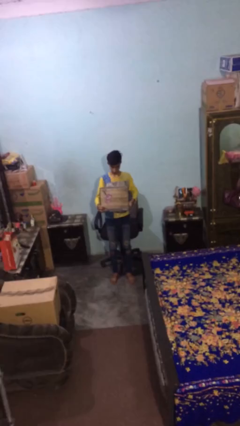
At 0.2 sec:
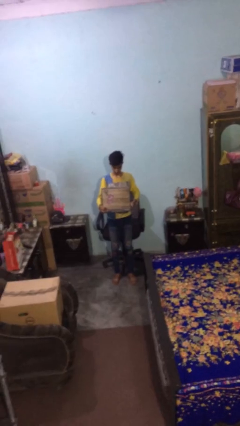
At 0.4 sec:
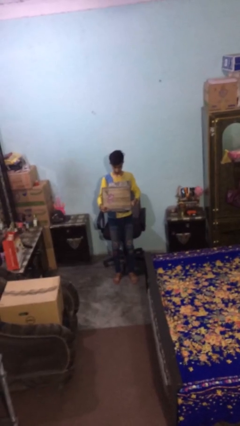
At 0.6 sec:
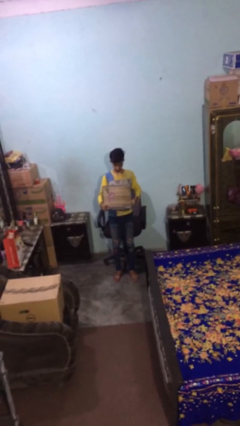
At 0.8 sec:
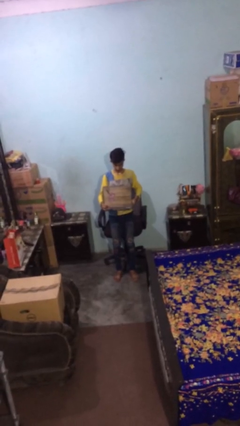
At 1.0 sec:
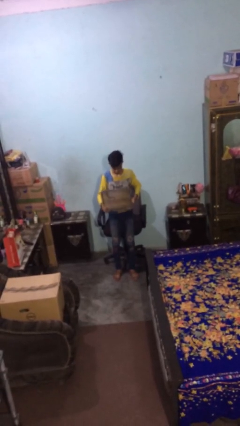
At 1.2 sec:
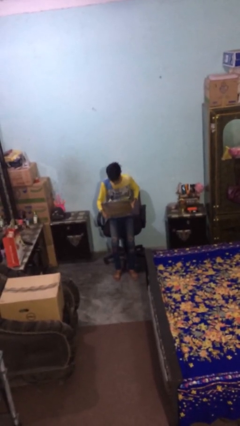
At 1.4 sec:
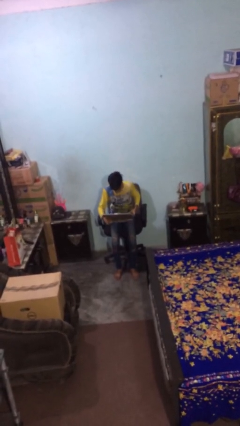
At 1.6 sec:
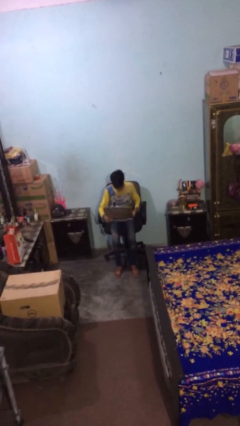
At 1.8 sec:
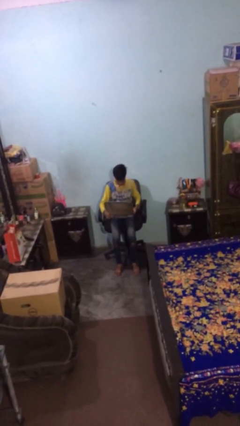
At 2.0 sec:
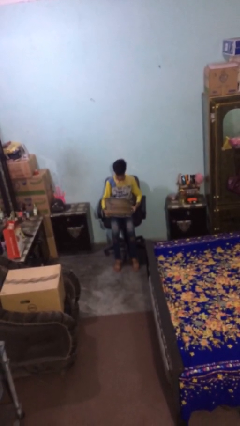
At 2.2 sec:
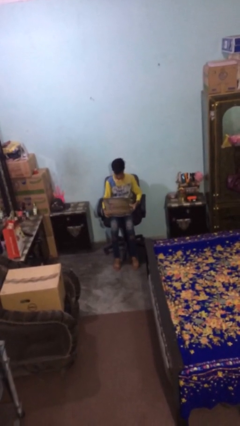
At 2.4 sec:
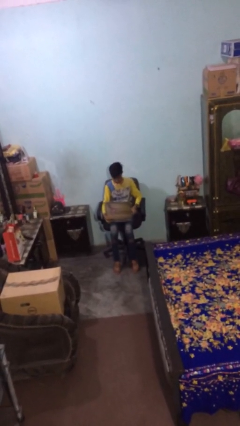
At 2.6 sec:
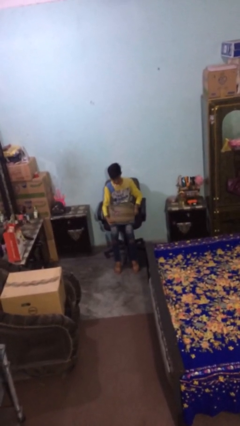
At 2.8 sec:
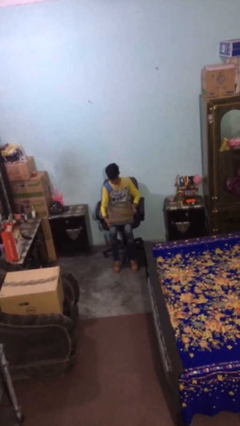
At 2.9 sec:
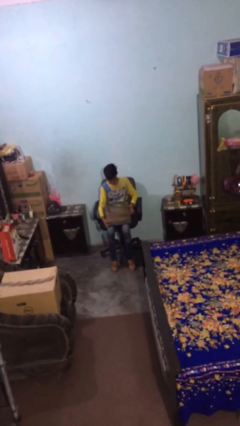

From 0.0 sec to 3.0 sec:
person sits down

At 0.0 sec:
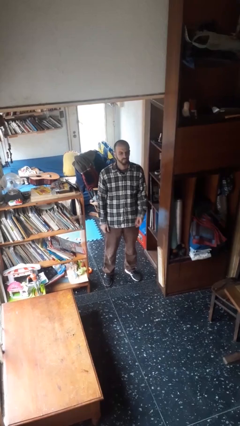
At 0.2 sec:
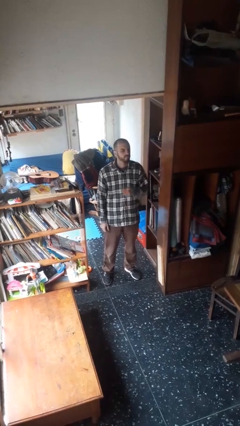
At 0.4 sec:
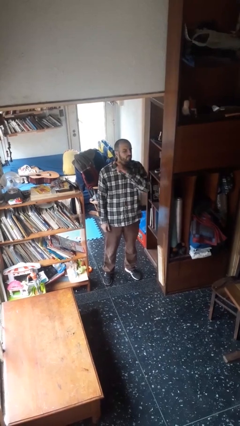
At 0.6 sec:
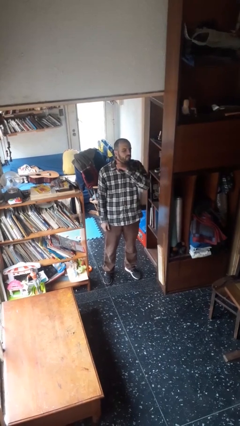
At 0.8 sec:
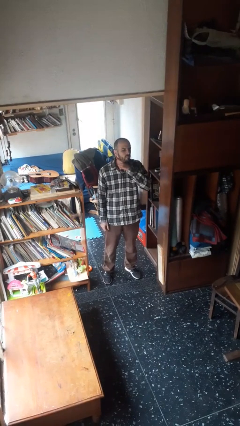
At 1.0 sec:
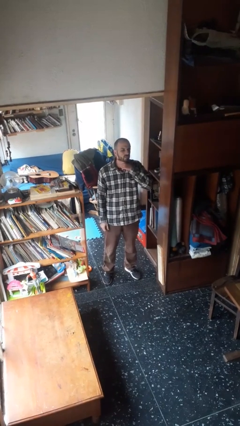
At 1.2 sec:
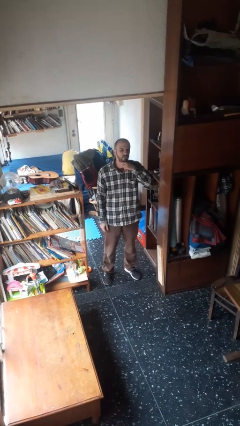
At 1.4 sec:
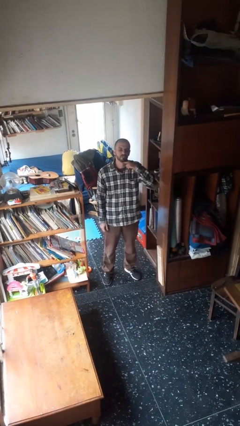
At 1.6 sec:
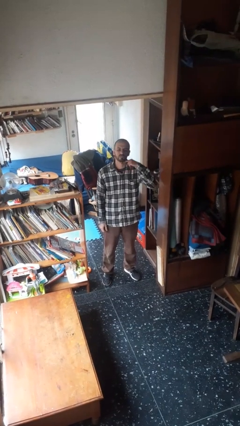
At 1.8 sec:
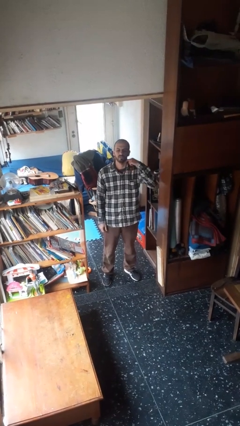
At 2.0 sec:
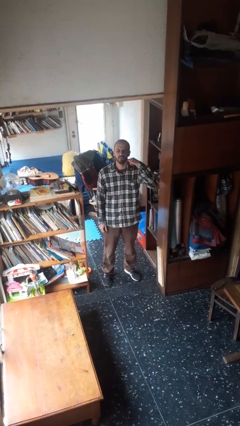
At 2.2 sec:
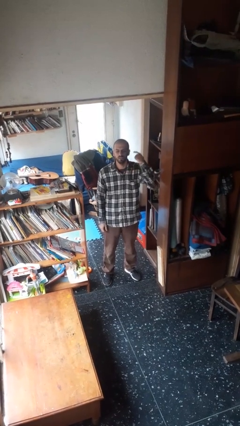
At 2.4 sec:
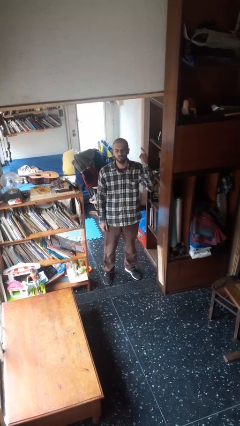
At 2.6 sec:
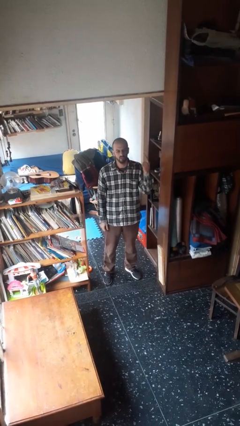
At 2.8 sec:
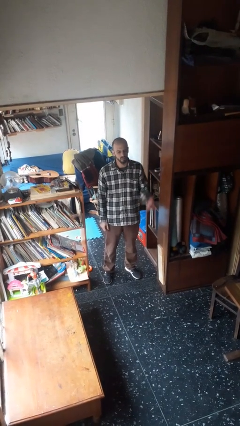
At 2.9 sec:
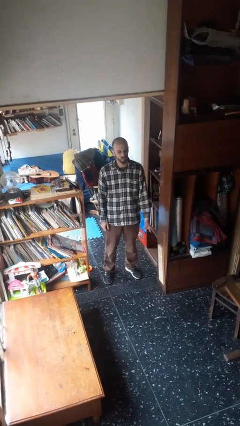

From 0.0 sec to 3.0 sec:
person gestures cut

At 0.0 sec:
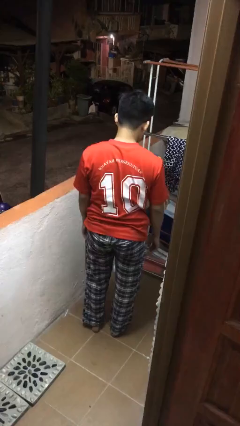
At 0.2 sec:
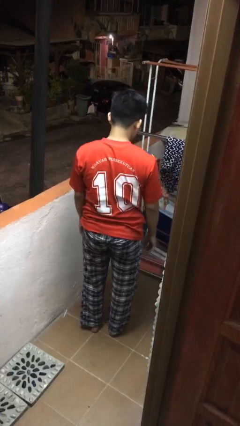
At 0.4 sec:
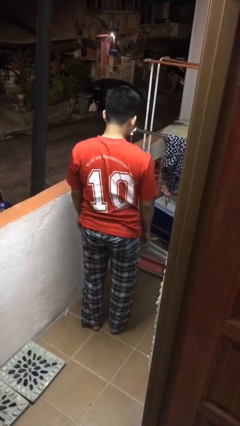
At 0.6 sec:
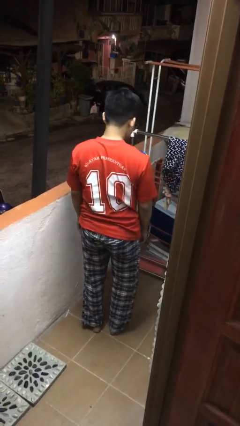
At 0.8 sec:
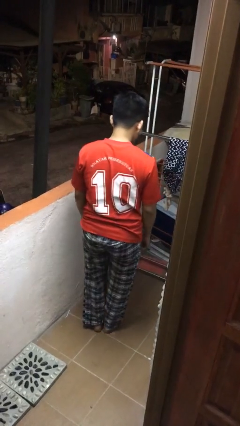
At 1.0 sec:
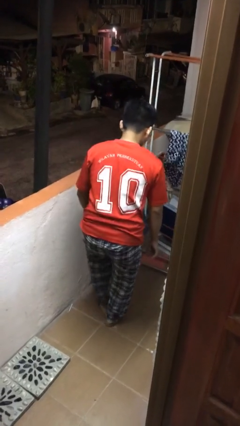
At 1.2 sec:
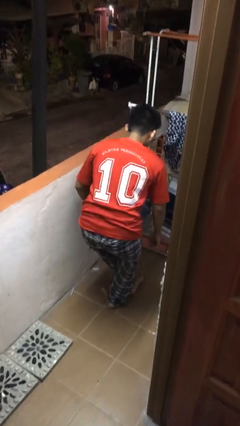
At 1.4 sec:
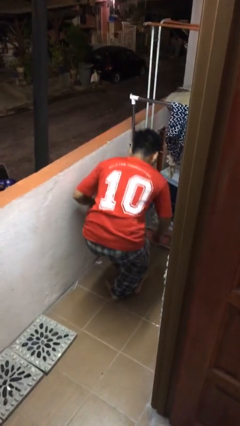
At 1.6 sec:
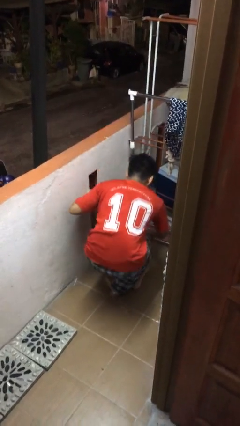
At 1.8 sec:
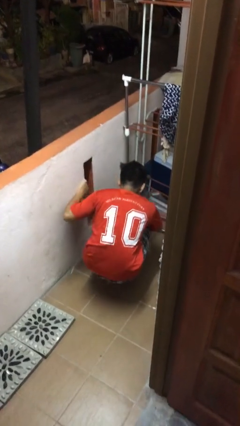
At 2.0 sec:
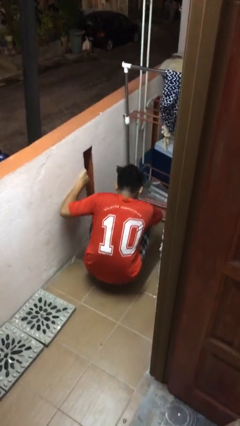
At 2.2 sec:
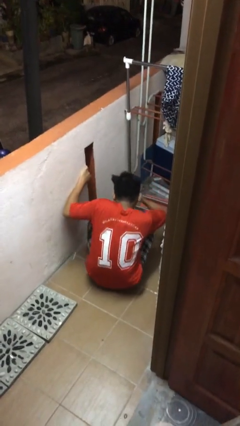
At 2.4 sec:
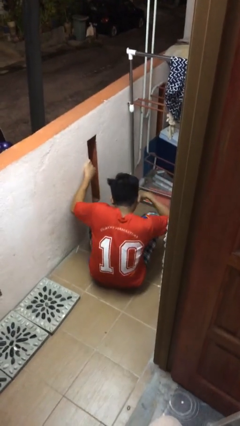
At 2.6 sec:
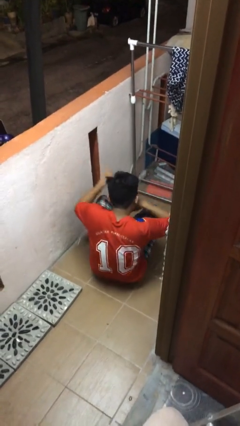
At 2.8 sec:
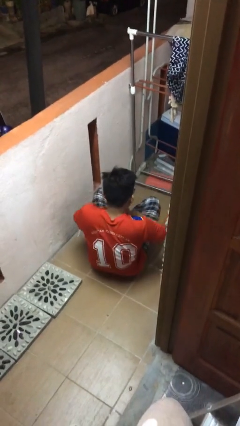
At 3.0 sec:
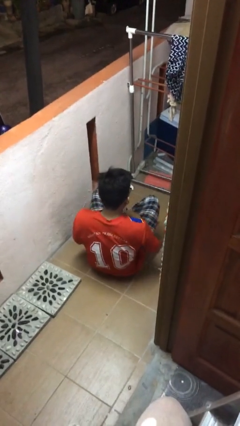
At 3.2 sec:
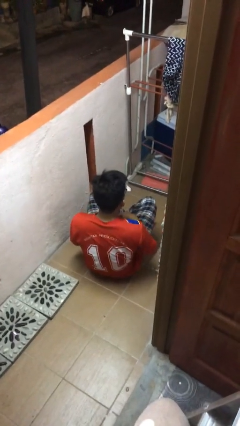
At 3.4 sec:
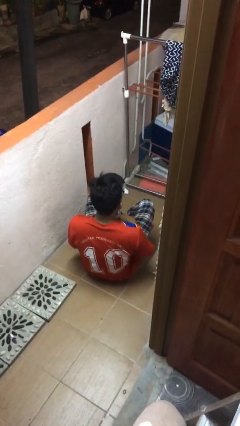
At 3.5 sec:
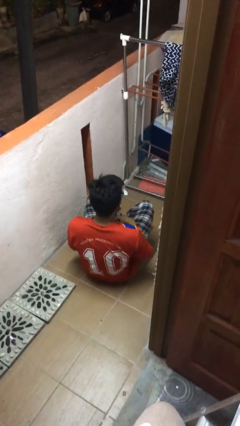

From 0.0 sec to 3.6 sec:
person sits crisscross

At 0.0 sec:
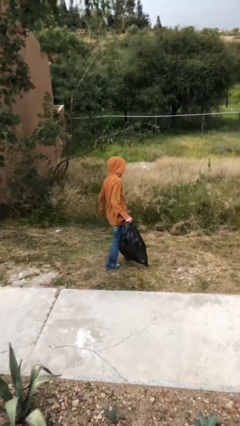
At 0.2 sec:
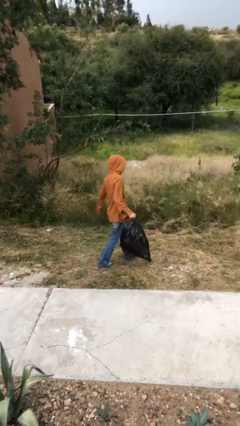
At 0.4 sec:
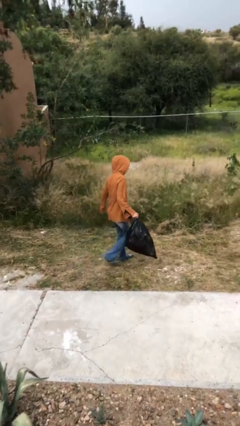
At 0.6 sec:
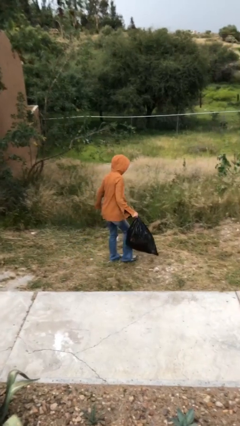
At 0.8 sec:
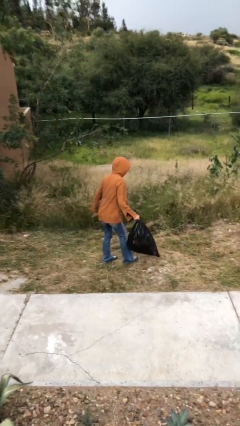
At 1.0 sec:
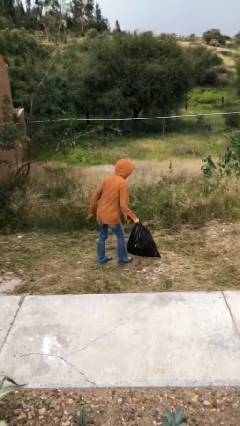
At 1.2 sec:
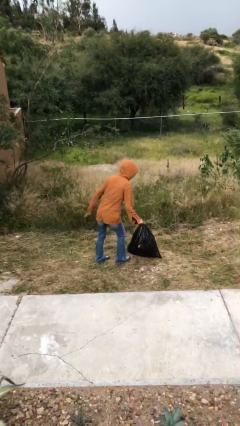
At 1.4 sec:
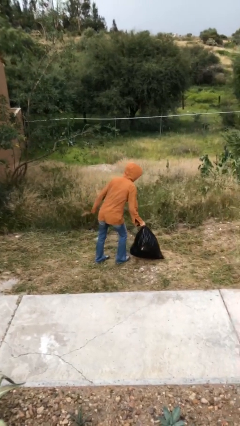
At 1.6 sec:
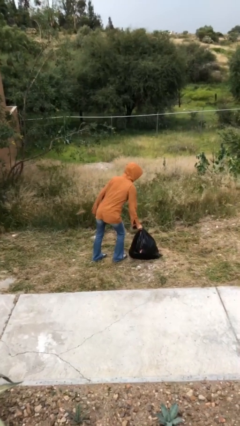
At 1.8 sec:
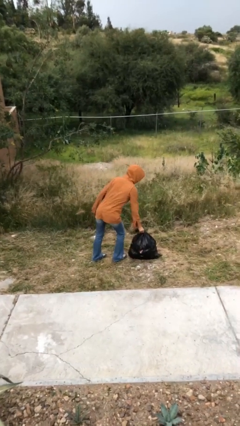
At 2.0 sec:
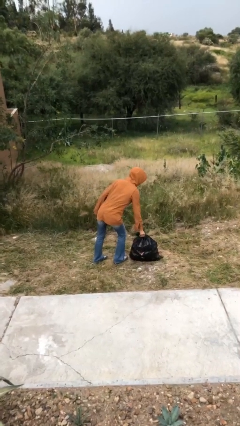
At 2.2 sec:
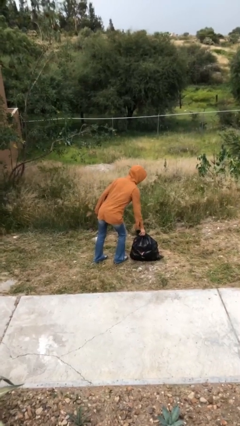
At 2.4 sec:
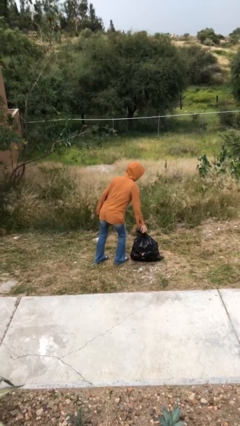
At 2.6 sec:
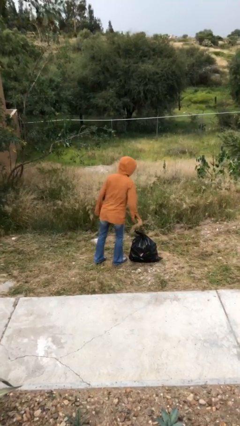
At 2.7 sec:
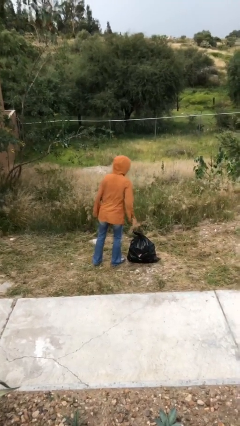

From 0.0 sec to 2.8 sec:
person puts down object on floor

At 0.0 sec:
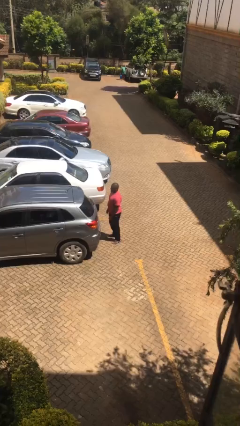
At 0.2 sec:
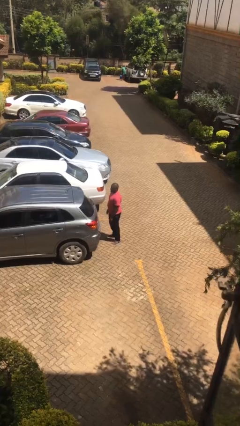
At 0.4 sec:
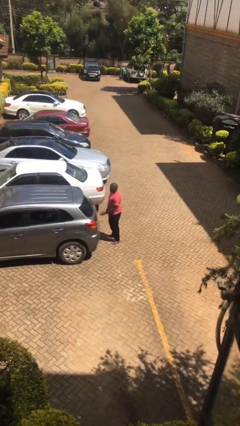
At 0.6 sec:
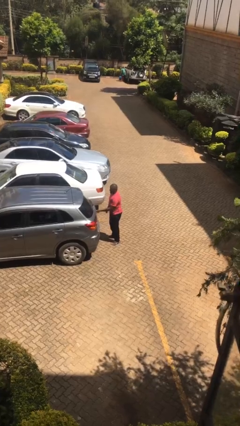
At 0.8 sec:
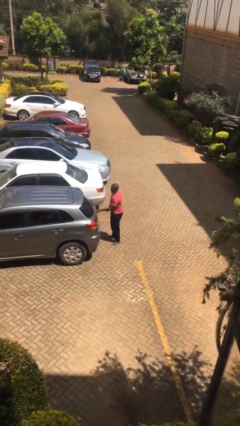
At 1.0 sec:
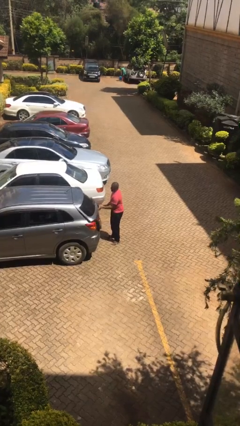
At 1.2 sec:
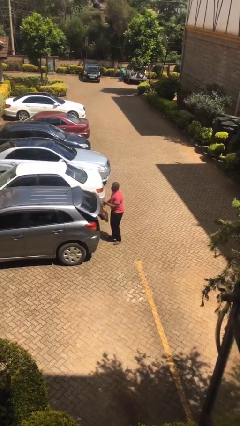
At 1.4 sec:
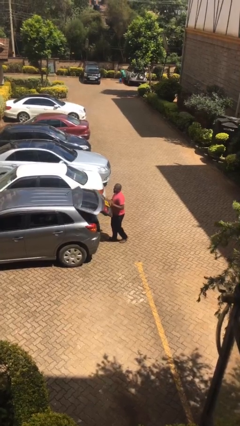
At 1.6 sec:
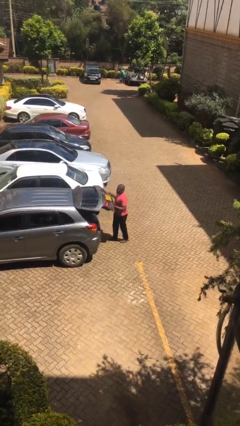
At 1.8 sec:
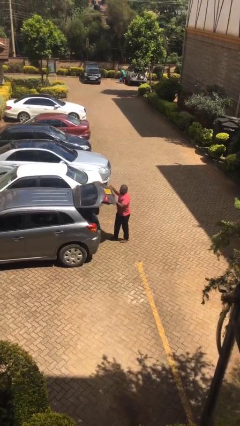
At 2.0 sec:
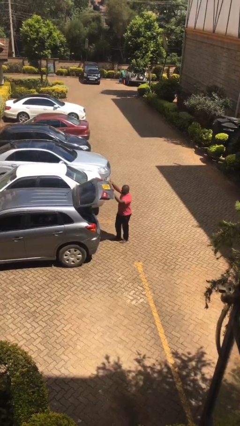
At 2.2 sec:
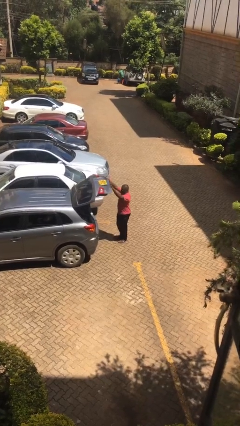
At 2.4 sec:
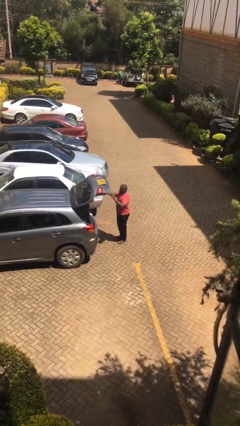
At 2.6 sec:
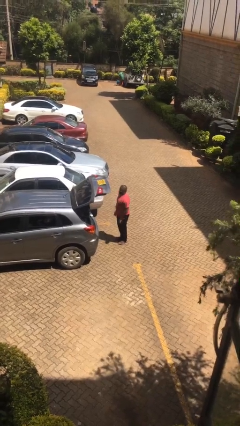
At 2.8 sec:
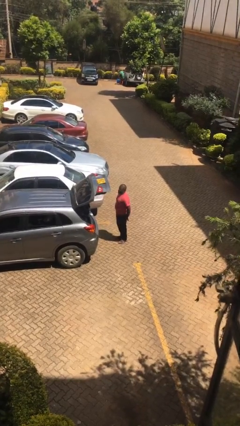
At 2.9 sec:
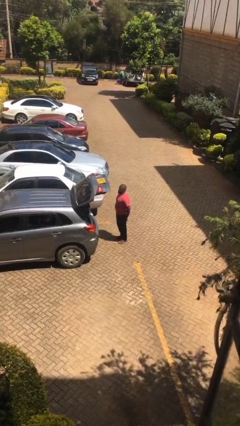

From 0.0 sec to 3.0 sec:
person opens car trunk

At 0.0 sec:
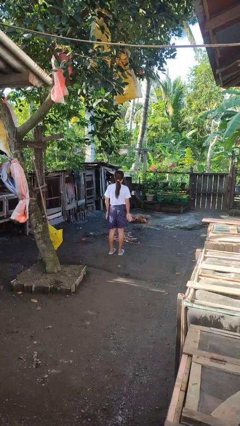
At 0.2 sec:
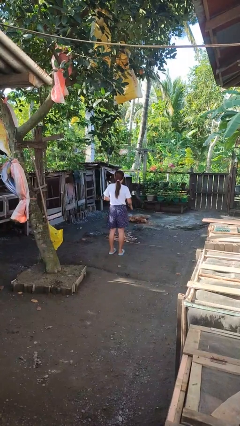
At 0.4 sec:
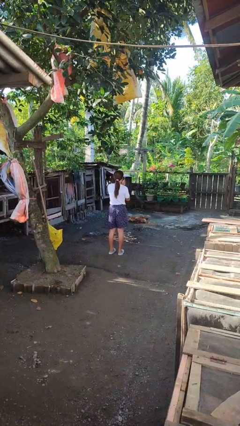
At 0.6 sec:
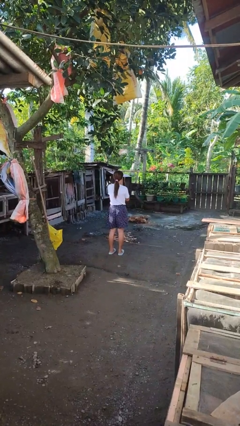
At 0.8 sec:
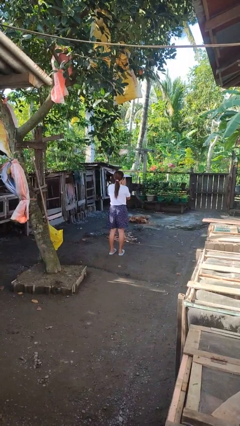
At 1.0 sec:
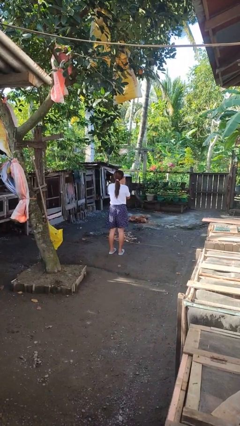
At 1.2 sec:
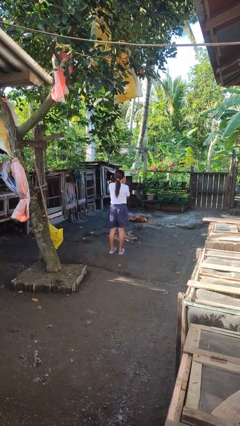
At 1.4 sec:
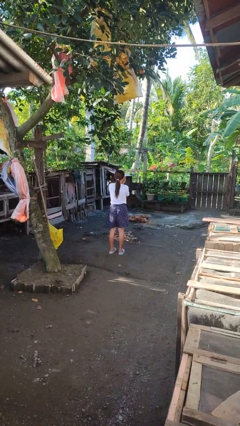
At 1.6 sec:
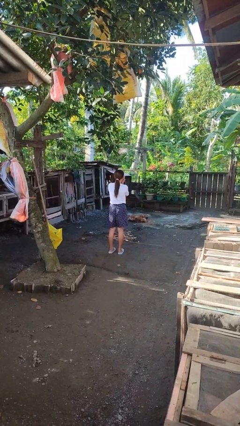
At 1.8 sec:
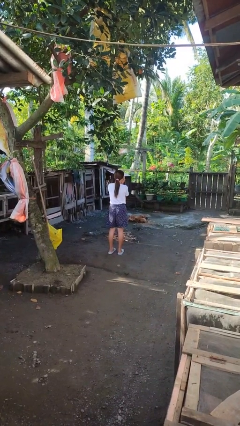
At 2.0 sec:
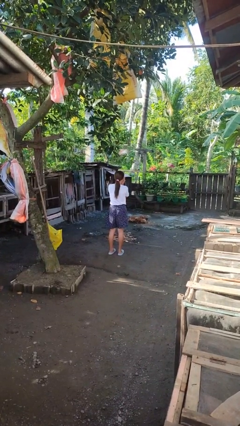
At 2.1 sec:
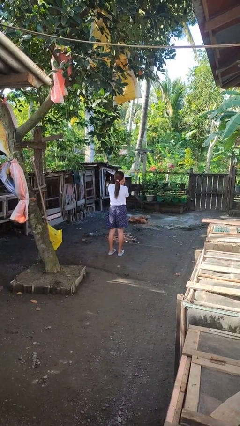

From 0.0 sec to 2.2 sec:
person blows into hands
